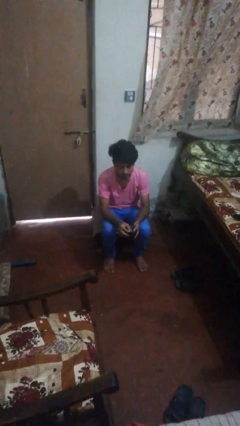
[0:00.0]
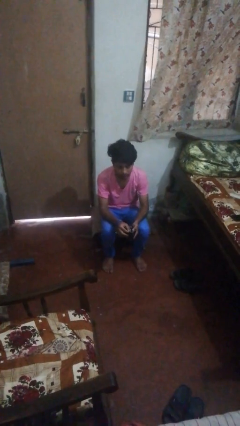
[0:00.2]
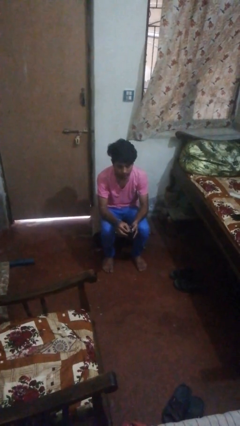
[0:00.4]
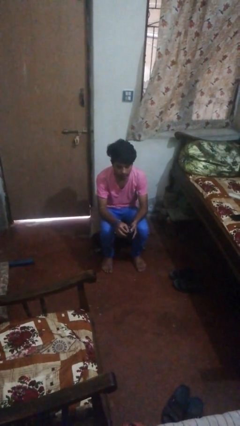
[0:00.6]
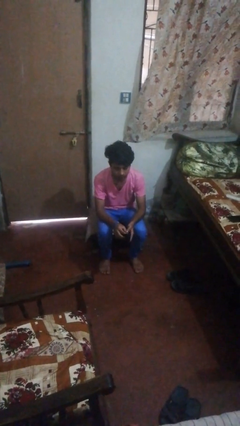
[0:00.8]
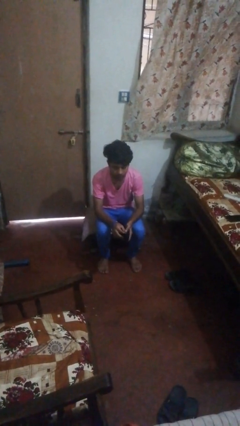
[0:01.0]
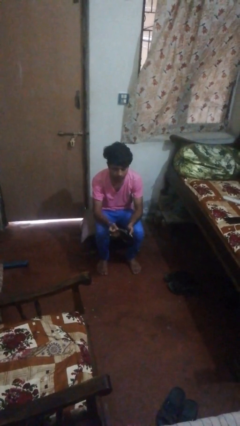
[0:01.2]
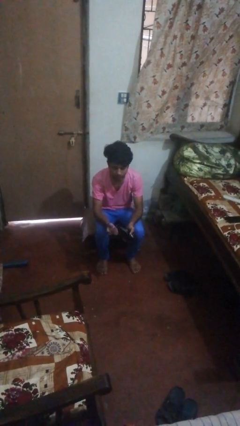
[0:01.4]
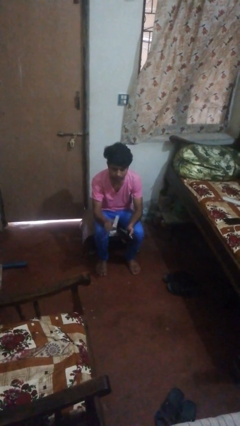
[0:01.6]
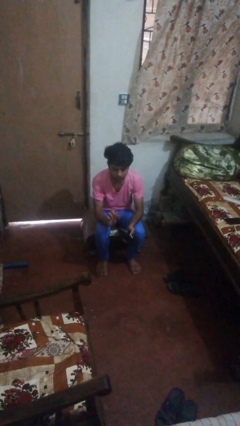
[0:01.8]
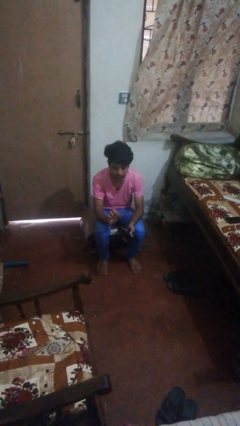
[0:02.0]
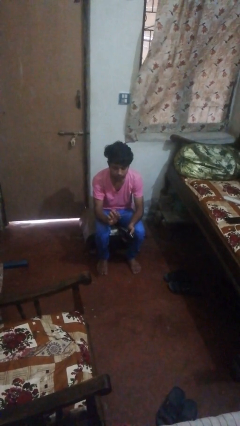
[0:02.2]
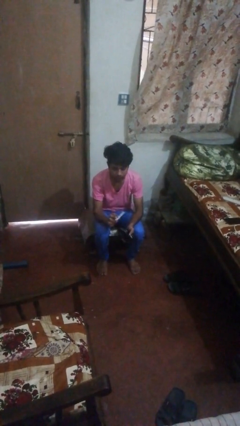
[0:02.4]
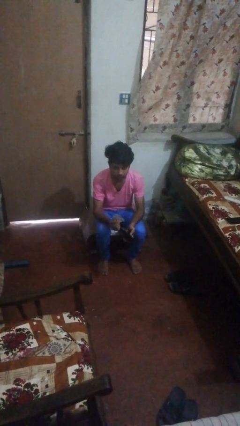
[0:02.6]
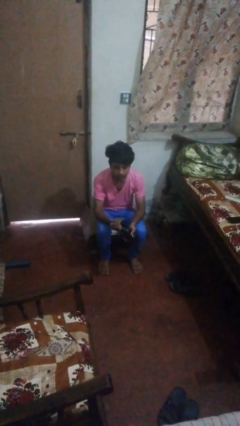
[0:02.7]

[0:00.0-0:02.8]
person takes object from purse

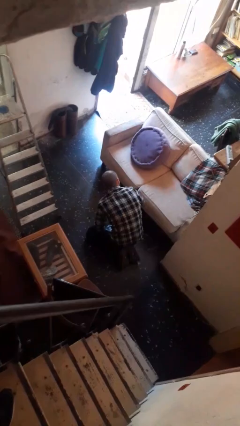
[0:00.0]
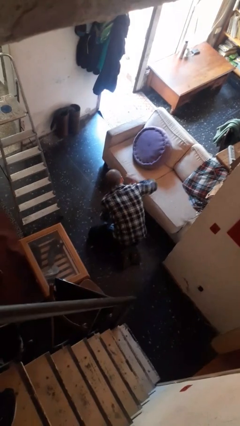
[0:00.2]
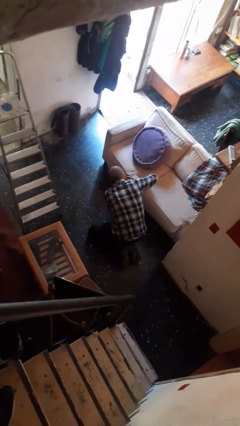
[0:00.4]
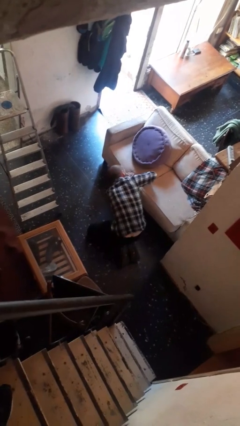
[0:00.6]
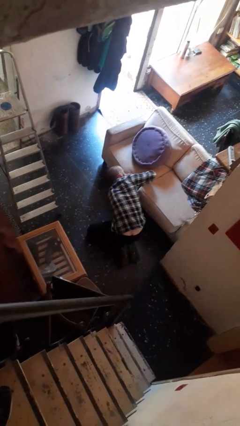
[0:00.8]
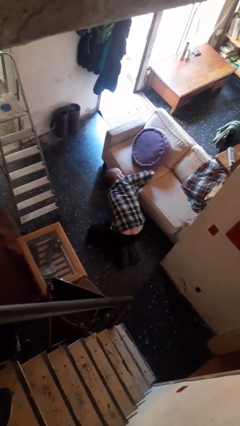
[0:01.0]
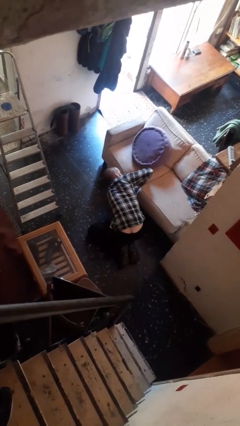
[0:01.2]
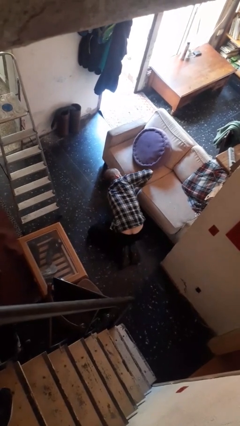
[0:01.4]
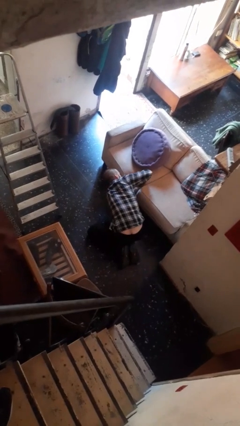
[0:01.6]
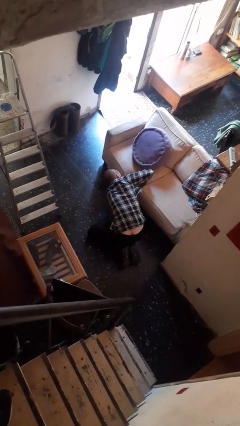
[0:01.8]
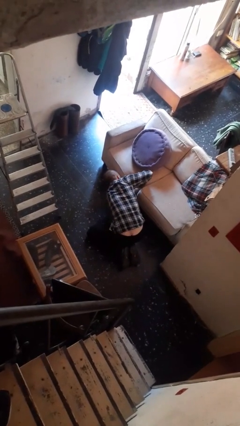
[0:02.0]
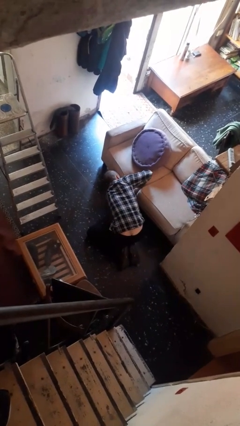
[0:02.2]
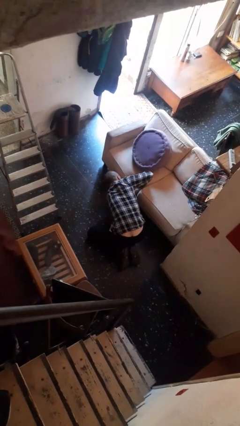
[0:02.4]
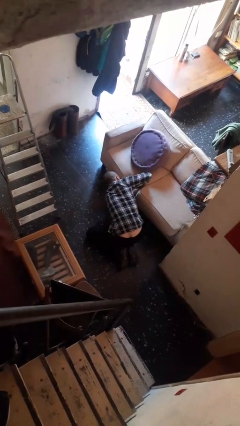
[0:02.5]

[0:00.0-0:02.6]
person searches under couch

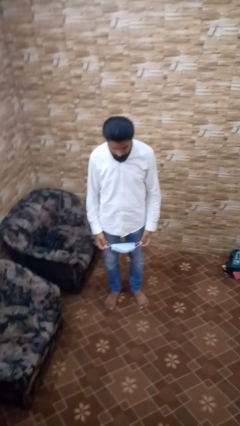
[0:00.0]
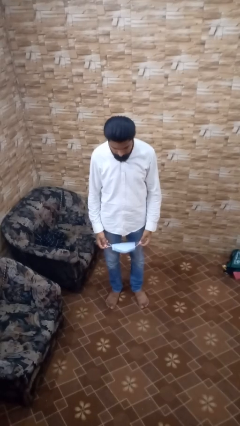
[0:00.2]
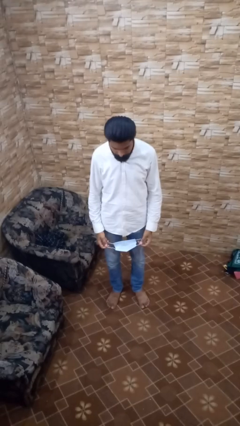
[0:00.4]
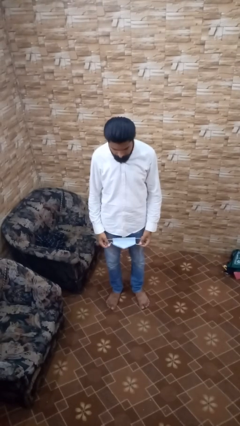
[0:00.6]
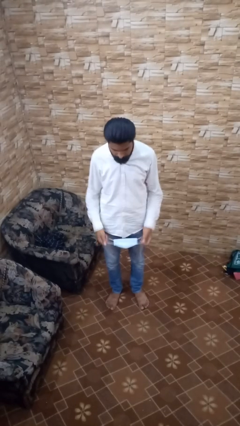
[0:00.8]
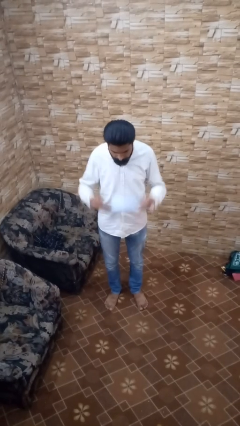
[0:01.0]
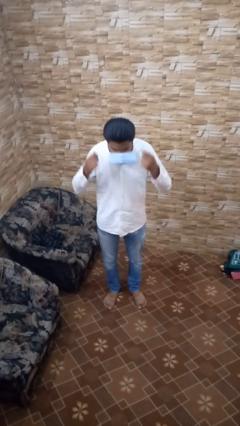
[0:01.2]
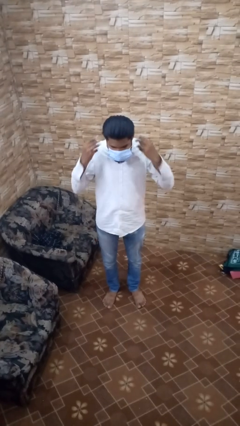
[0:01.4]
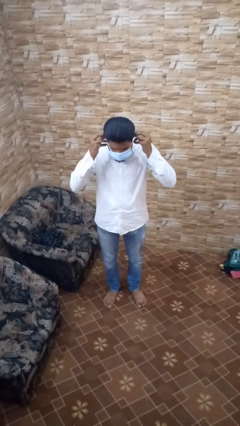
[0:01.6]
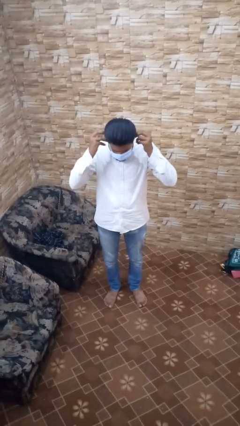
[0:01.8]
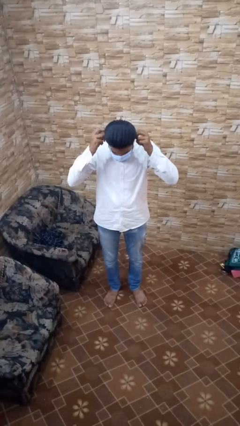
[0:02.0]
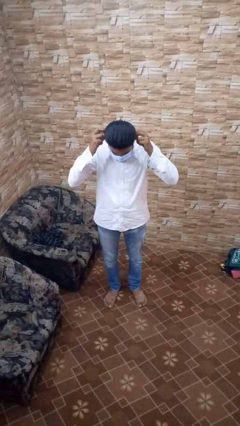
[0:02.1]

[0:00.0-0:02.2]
person puts on facemask

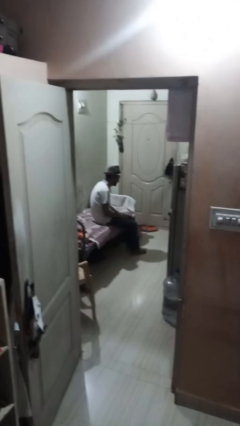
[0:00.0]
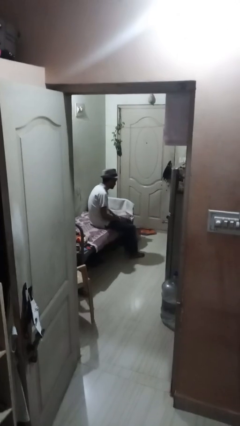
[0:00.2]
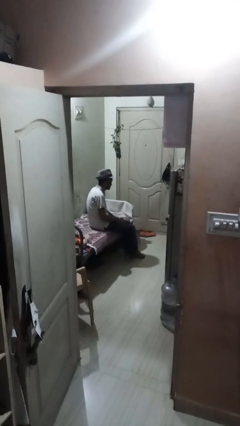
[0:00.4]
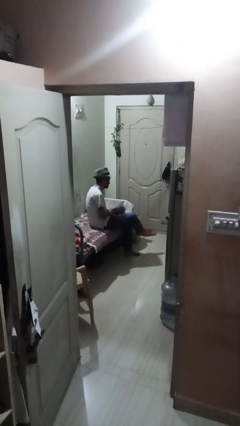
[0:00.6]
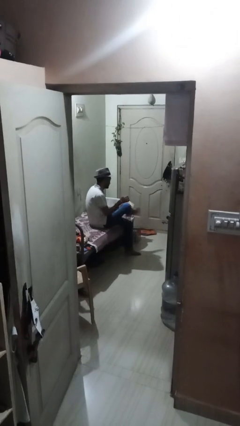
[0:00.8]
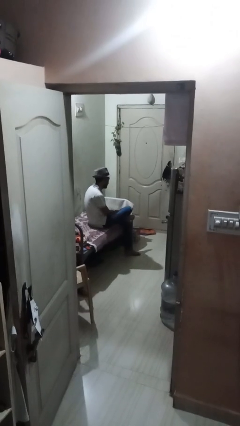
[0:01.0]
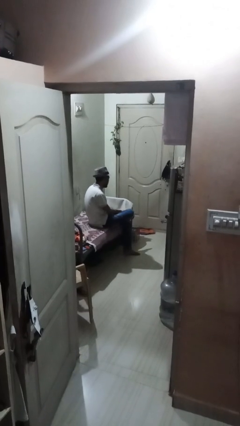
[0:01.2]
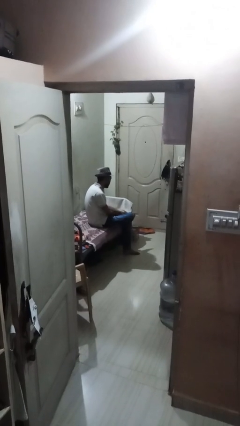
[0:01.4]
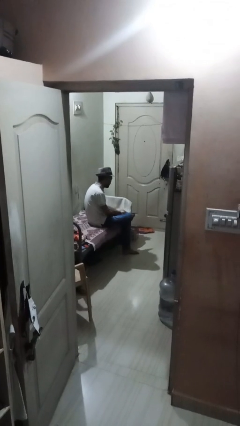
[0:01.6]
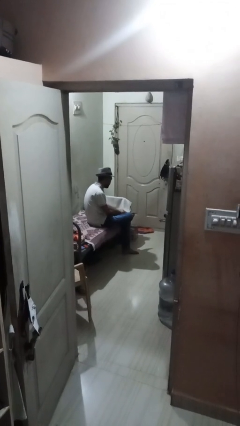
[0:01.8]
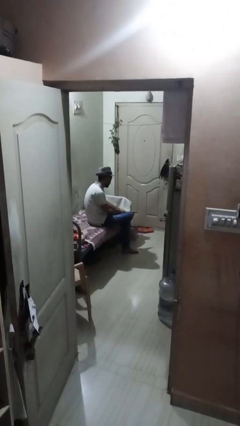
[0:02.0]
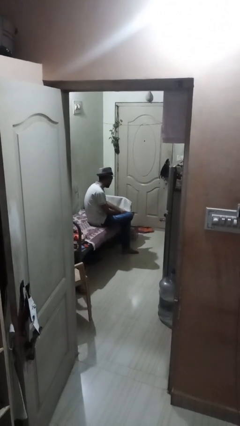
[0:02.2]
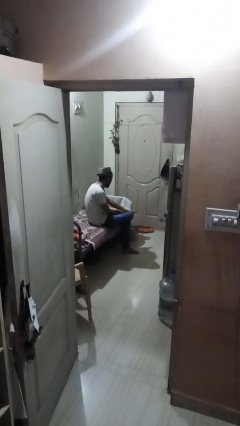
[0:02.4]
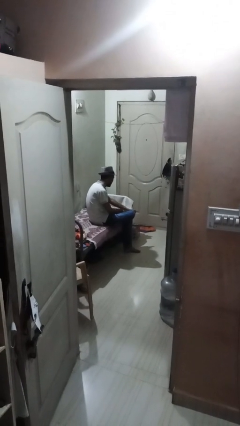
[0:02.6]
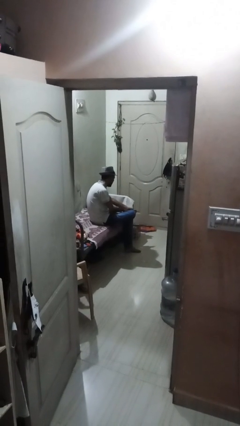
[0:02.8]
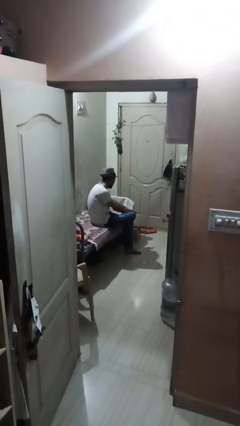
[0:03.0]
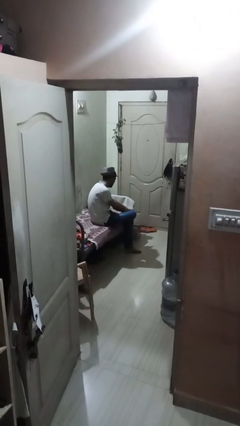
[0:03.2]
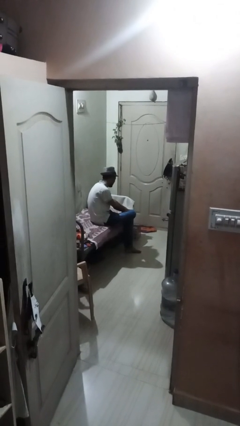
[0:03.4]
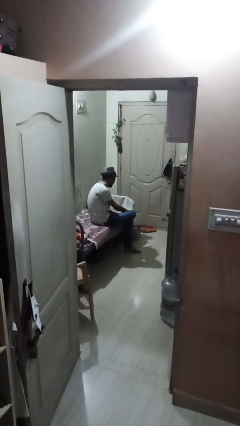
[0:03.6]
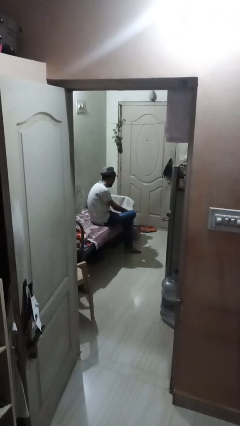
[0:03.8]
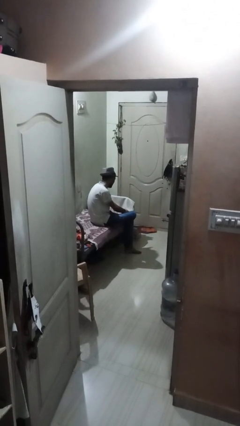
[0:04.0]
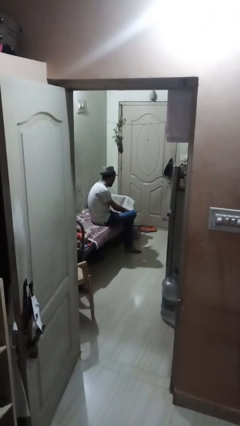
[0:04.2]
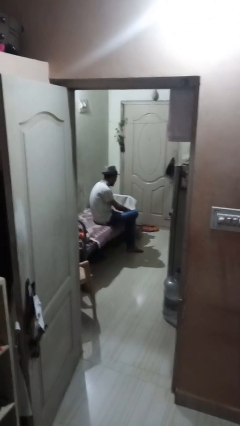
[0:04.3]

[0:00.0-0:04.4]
person rubs foot

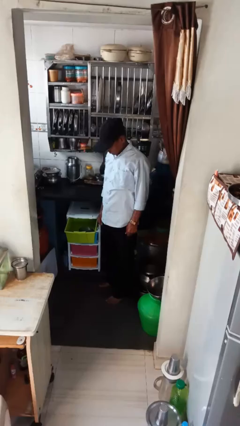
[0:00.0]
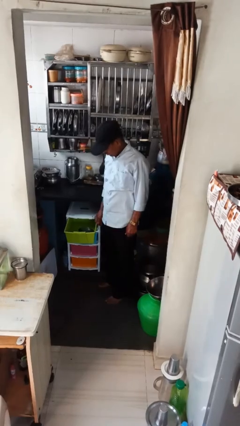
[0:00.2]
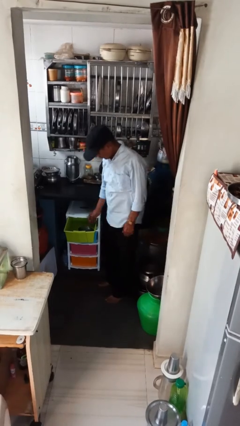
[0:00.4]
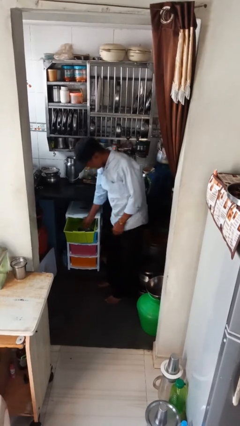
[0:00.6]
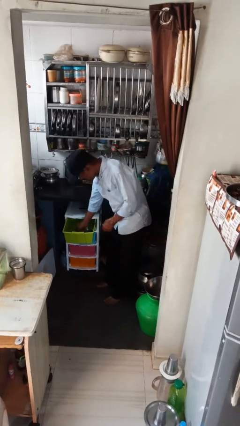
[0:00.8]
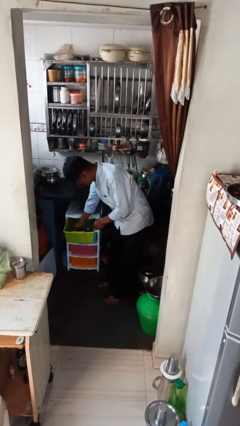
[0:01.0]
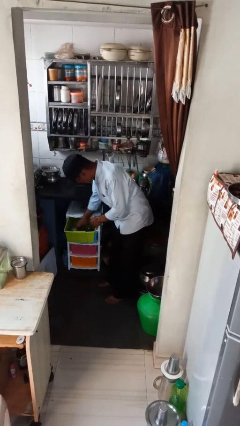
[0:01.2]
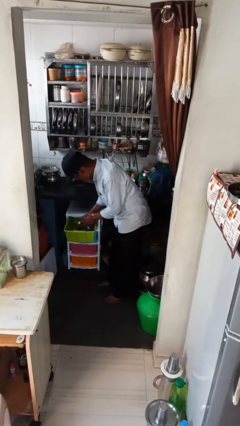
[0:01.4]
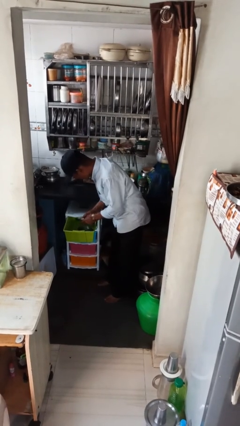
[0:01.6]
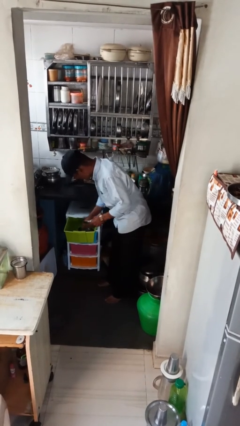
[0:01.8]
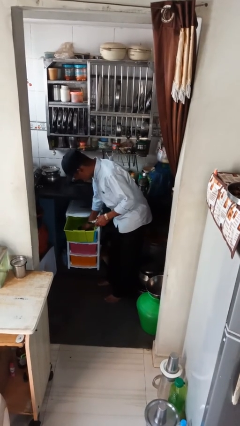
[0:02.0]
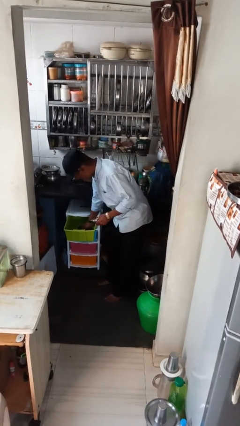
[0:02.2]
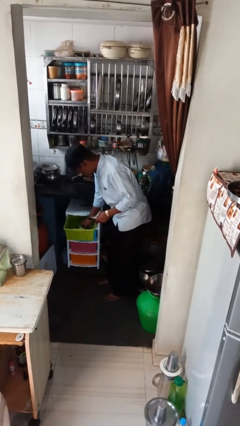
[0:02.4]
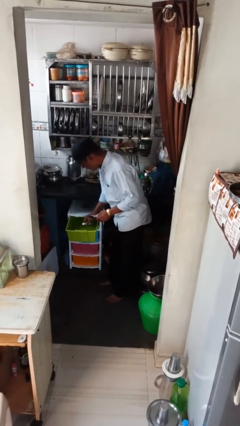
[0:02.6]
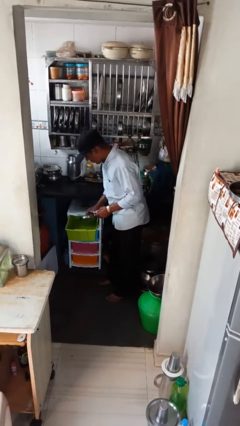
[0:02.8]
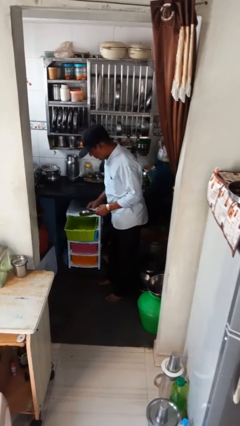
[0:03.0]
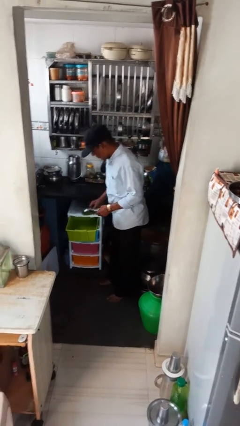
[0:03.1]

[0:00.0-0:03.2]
person takes object from cabinet

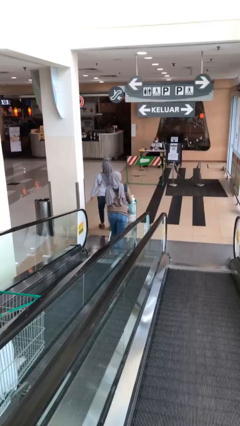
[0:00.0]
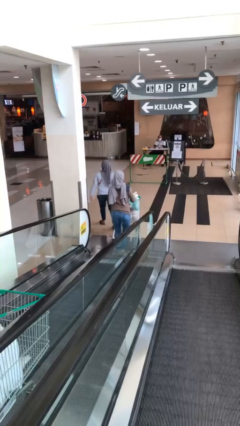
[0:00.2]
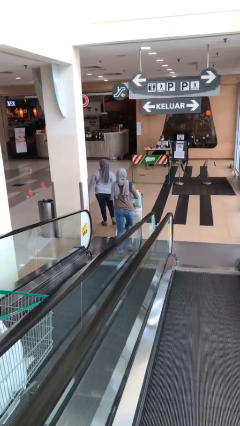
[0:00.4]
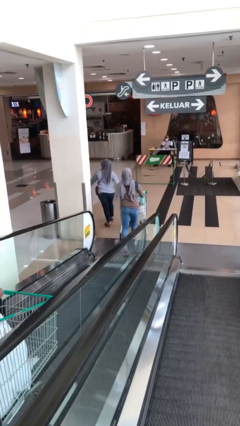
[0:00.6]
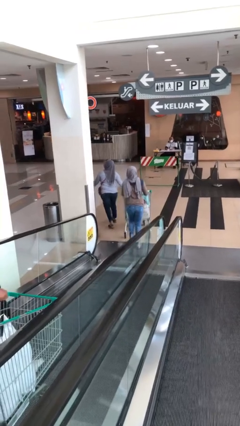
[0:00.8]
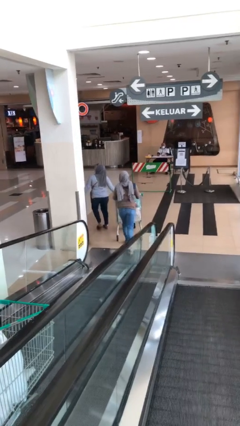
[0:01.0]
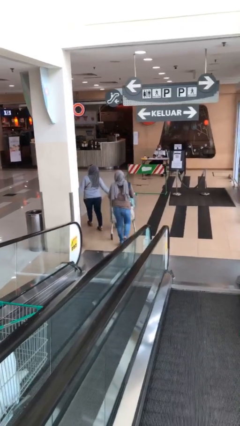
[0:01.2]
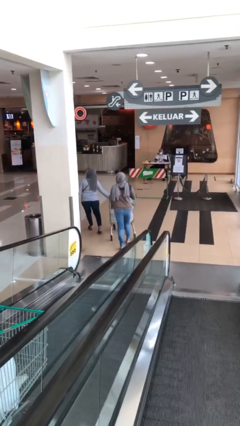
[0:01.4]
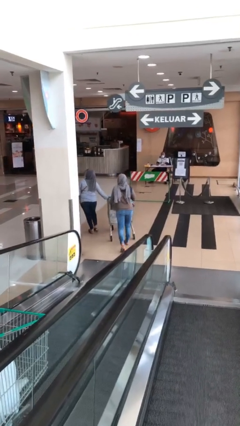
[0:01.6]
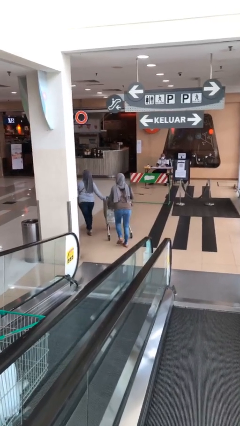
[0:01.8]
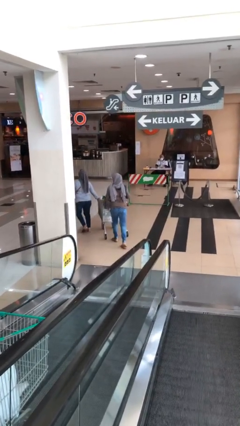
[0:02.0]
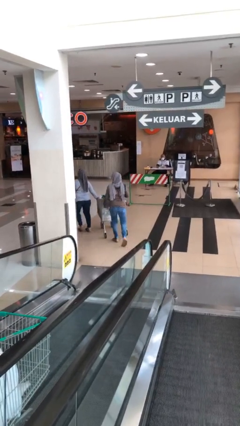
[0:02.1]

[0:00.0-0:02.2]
person talks to person
